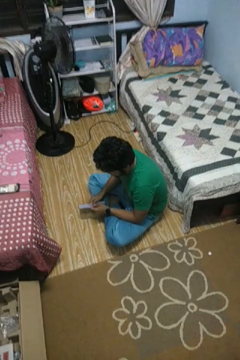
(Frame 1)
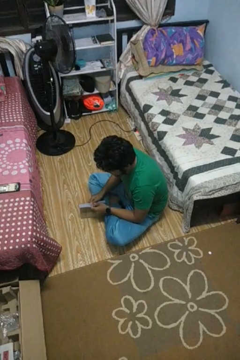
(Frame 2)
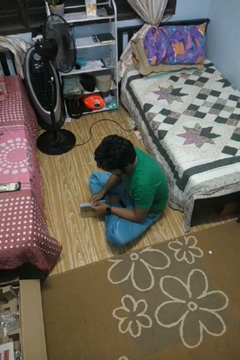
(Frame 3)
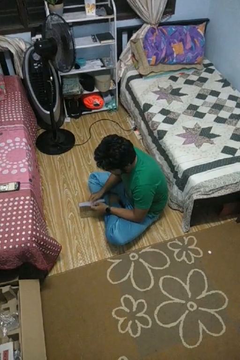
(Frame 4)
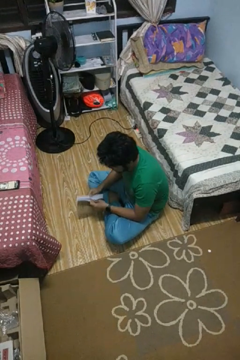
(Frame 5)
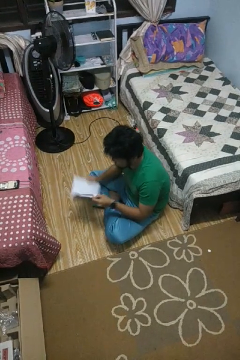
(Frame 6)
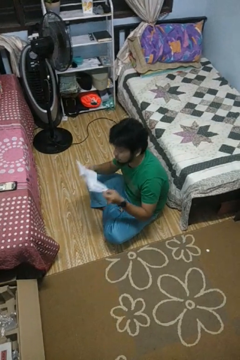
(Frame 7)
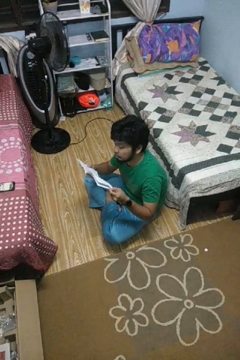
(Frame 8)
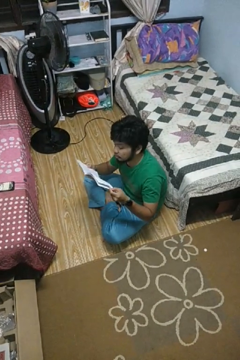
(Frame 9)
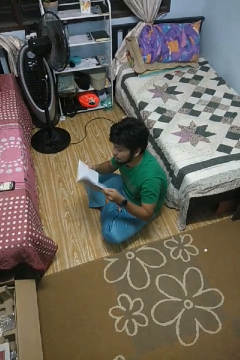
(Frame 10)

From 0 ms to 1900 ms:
person reads book

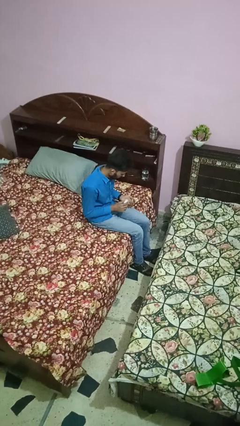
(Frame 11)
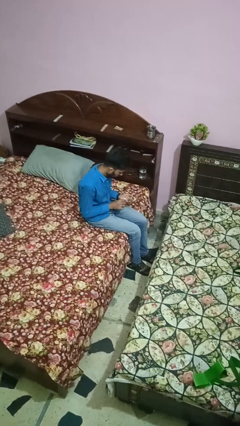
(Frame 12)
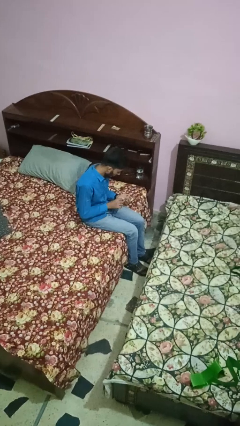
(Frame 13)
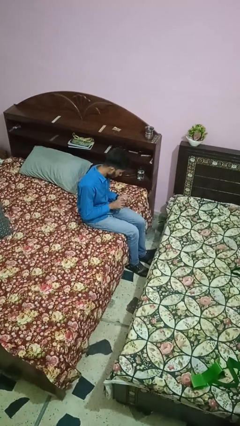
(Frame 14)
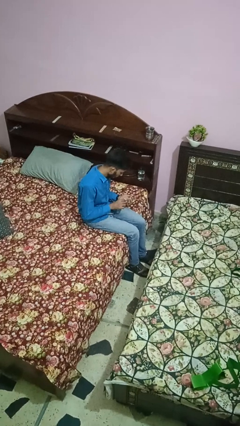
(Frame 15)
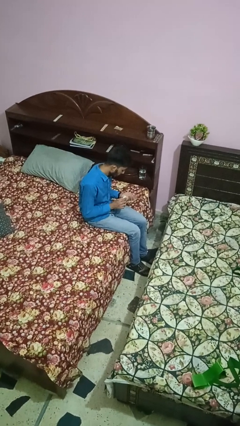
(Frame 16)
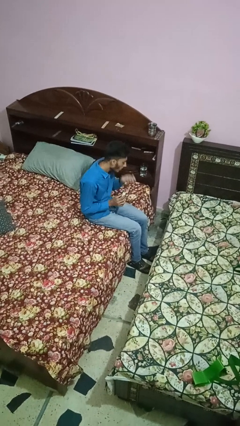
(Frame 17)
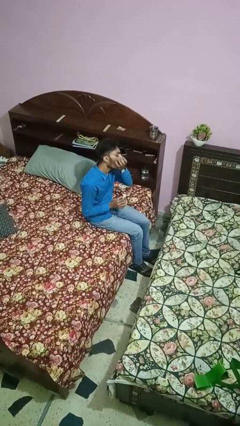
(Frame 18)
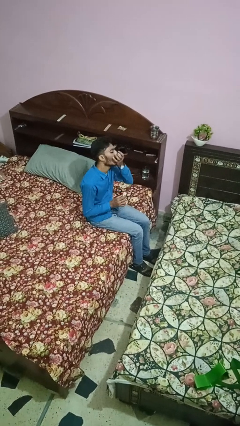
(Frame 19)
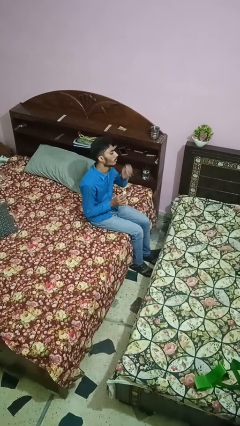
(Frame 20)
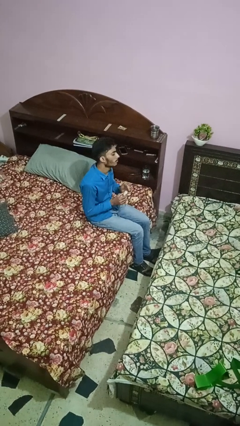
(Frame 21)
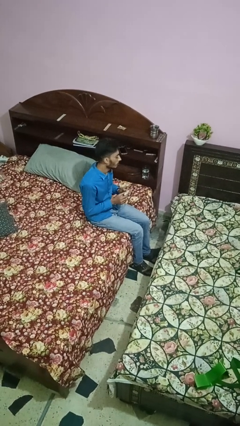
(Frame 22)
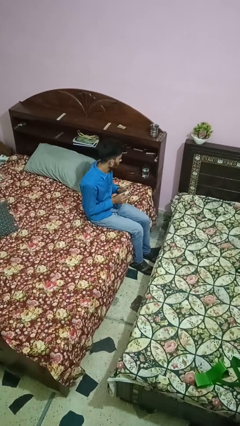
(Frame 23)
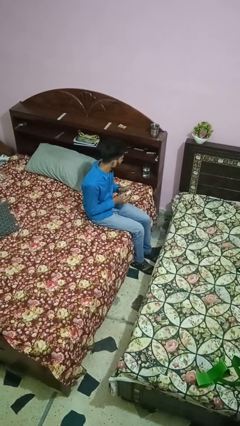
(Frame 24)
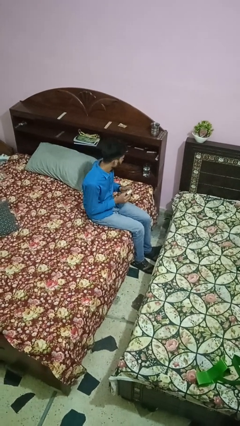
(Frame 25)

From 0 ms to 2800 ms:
person takes medicine pills

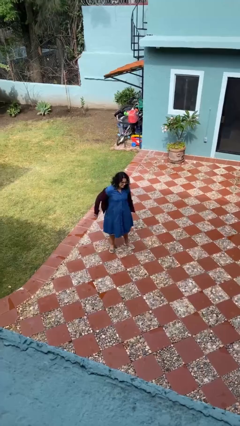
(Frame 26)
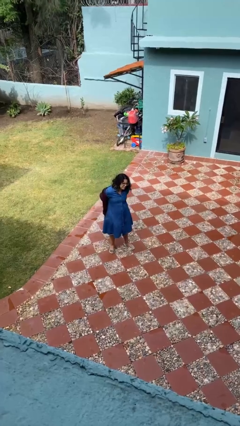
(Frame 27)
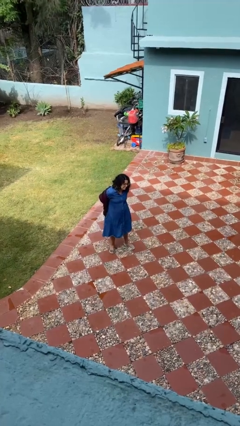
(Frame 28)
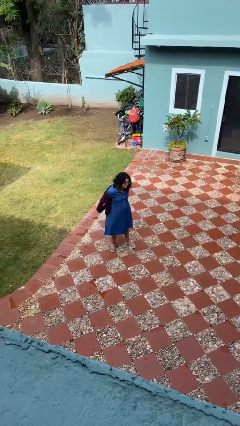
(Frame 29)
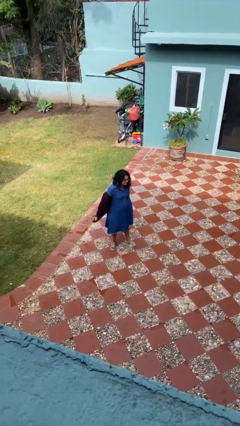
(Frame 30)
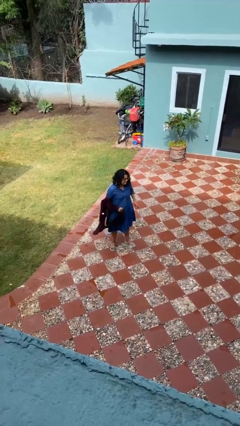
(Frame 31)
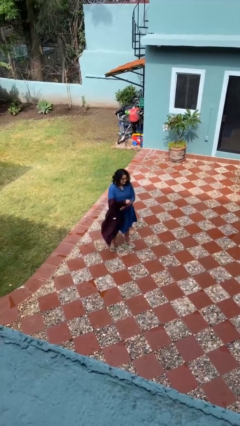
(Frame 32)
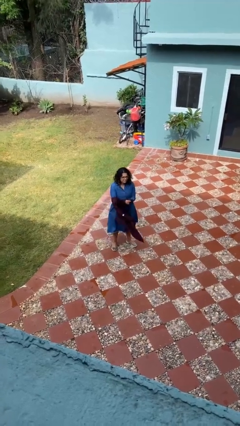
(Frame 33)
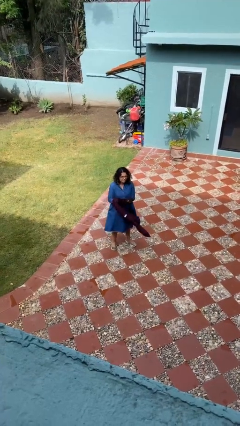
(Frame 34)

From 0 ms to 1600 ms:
person takes off jacket

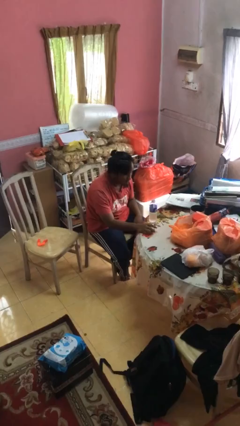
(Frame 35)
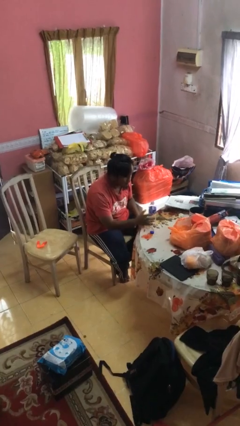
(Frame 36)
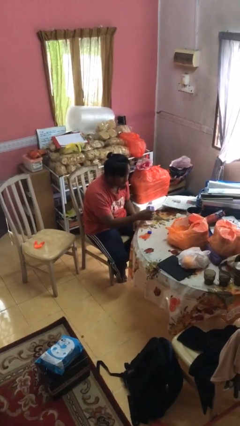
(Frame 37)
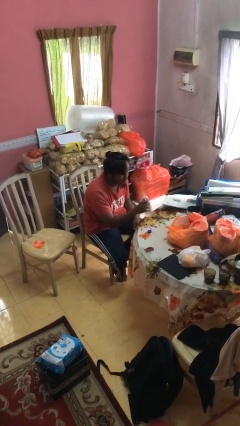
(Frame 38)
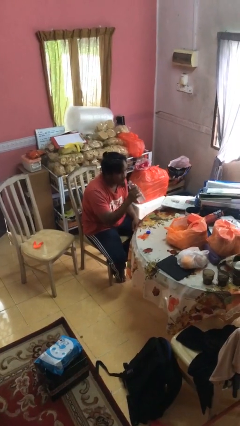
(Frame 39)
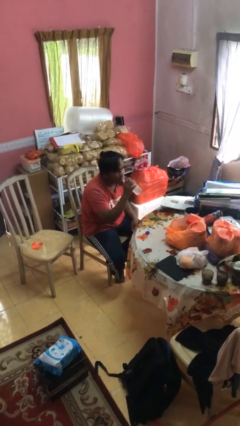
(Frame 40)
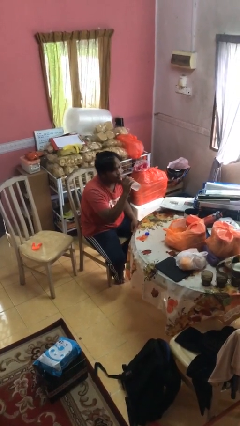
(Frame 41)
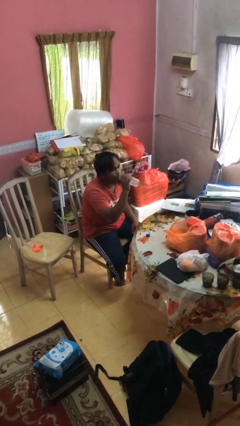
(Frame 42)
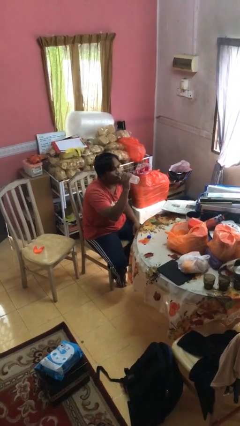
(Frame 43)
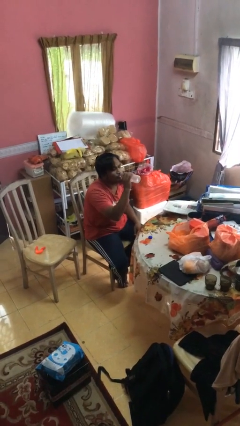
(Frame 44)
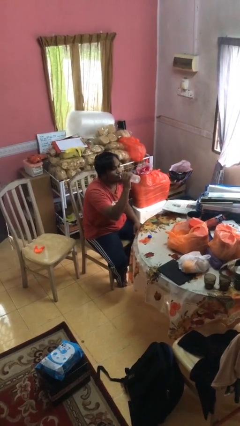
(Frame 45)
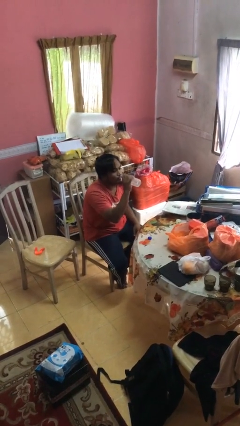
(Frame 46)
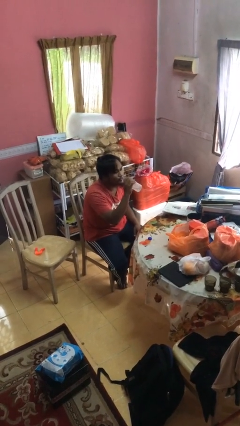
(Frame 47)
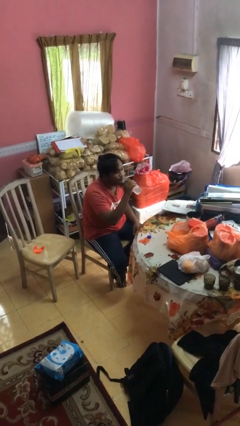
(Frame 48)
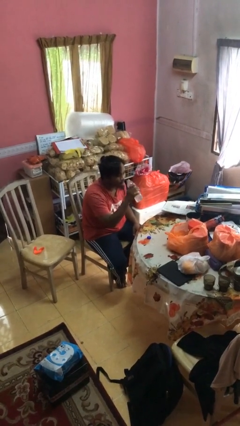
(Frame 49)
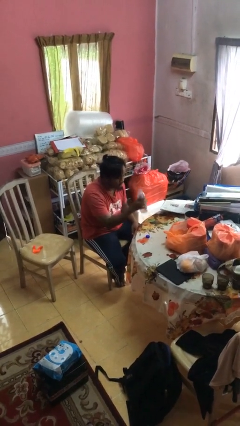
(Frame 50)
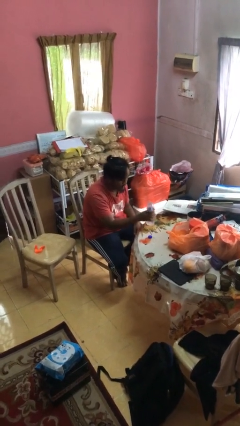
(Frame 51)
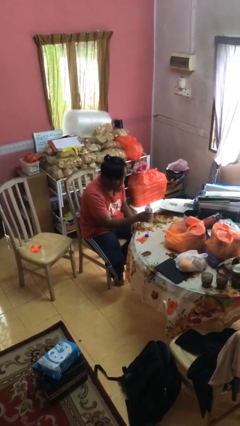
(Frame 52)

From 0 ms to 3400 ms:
person drinks from bottle

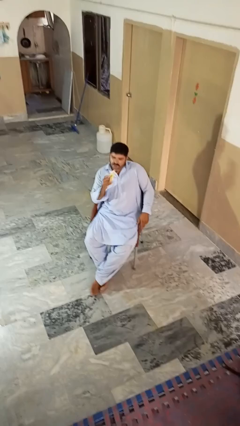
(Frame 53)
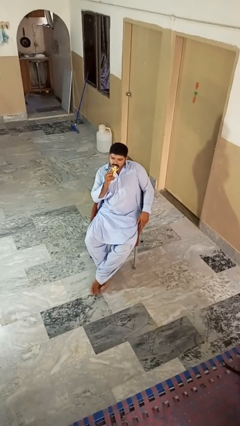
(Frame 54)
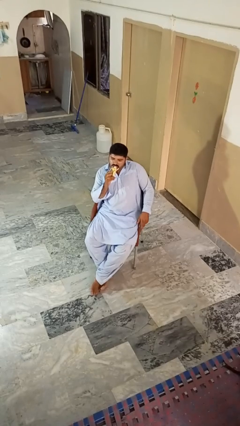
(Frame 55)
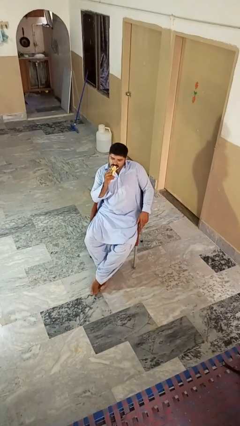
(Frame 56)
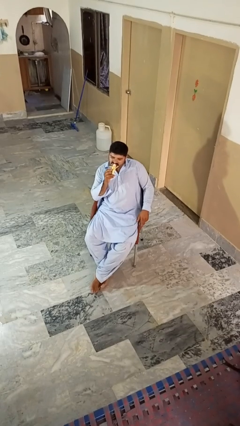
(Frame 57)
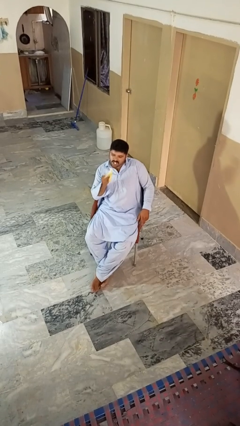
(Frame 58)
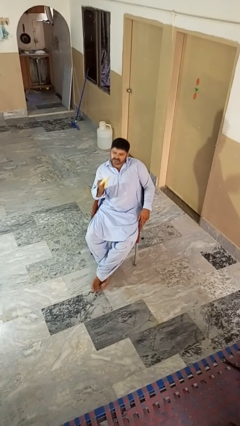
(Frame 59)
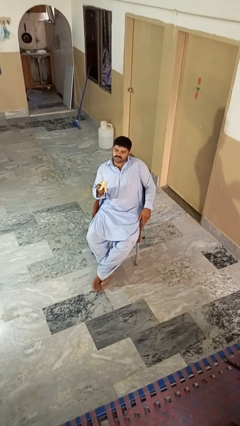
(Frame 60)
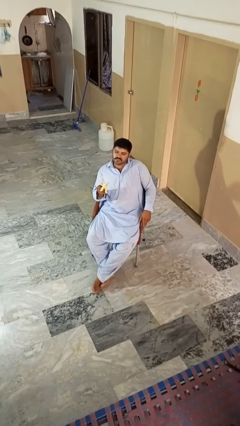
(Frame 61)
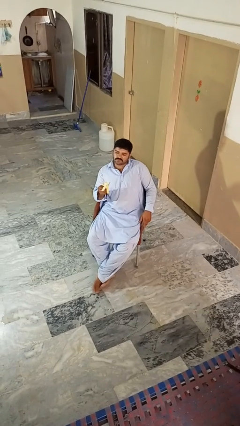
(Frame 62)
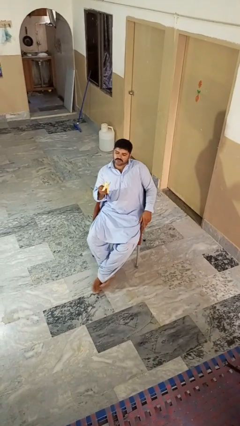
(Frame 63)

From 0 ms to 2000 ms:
person eats banana

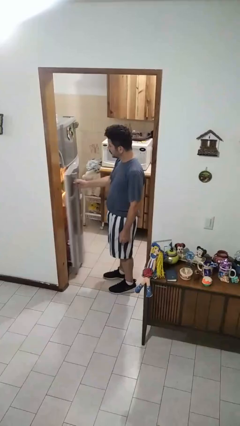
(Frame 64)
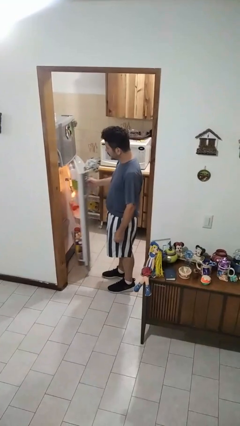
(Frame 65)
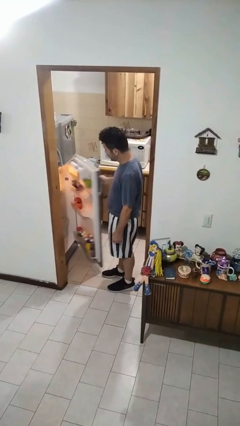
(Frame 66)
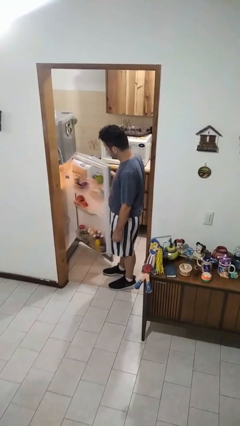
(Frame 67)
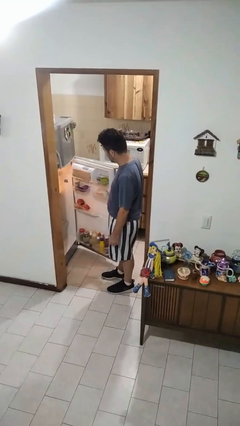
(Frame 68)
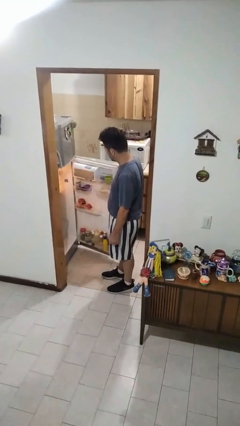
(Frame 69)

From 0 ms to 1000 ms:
person opens refrigerator

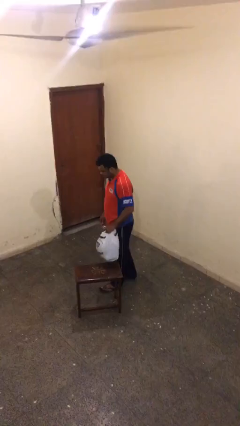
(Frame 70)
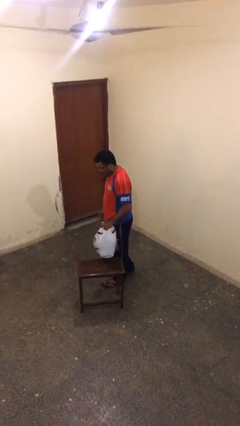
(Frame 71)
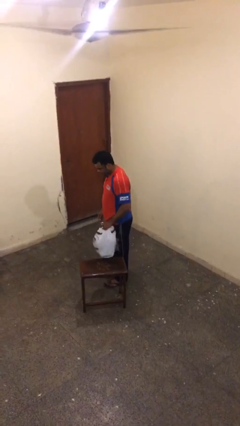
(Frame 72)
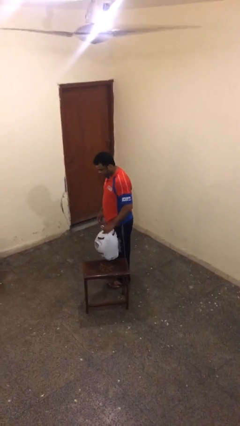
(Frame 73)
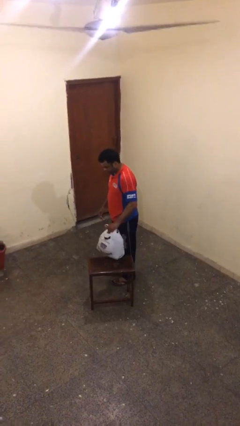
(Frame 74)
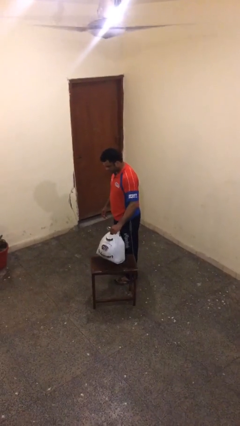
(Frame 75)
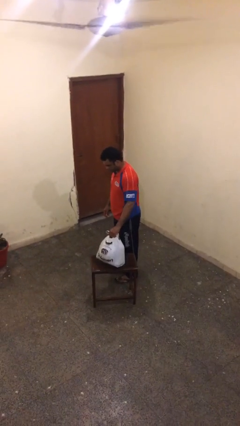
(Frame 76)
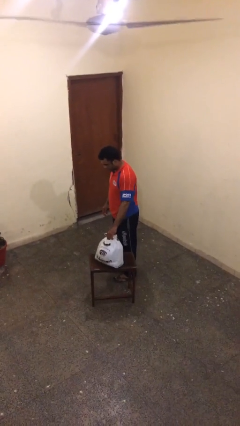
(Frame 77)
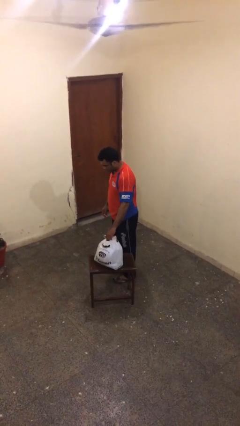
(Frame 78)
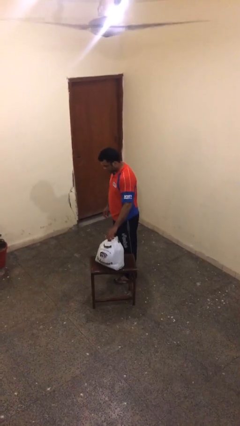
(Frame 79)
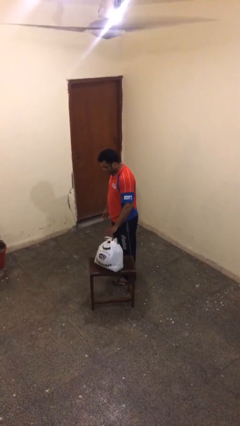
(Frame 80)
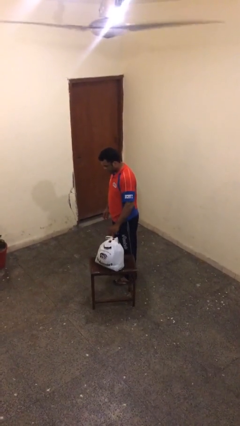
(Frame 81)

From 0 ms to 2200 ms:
person puts down object on table

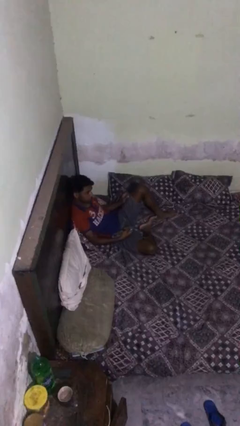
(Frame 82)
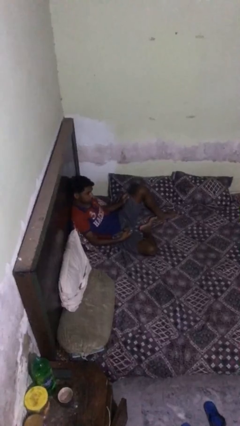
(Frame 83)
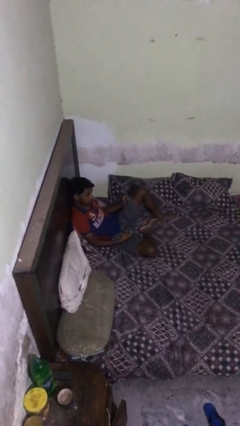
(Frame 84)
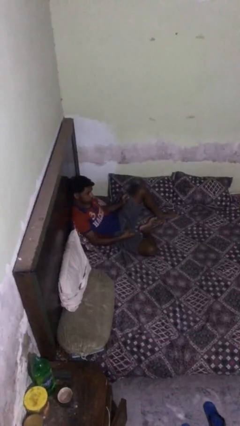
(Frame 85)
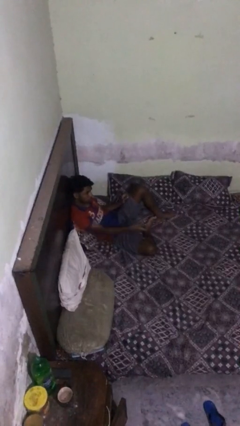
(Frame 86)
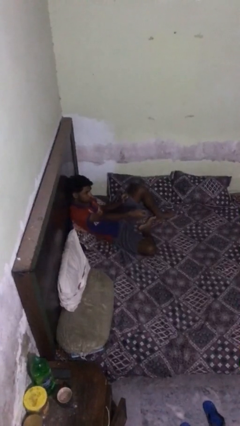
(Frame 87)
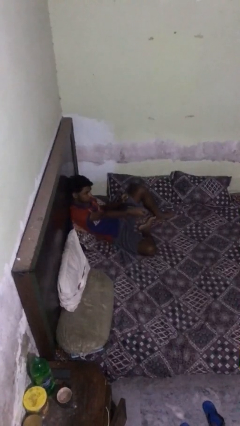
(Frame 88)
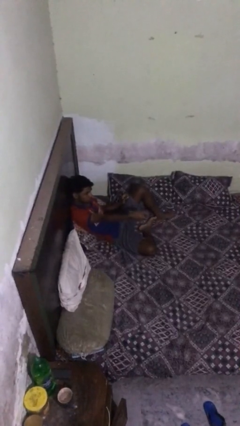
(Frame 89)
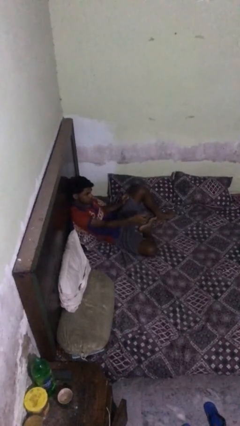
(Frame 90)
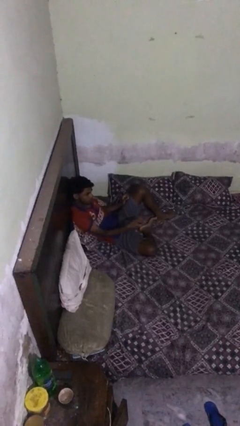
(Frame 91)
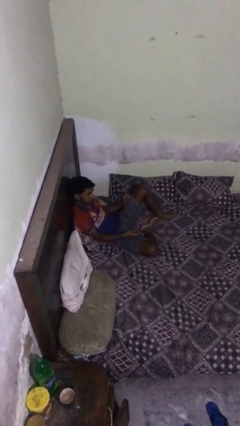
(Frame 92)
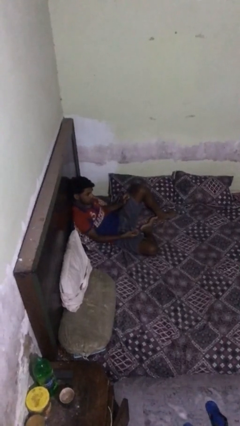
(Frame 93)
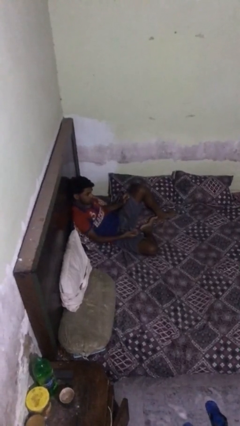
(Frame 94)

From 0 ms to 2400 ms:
person uses television remote
